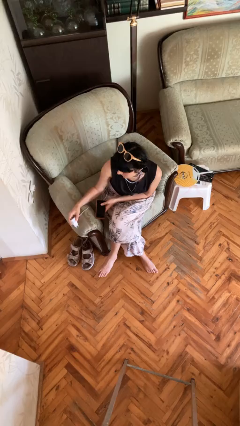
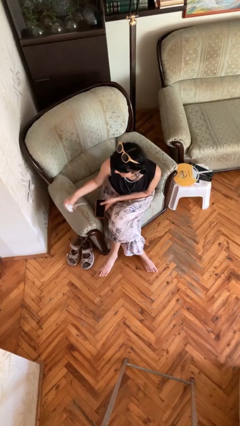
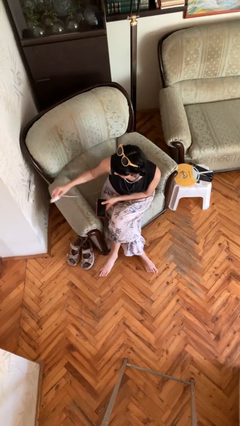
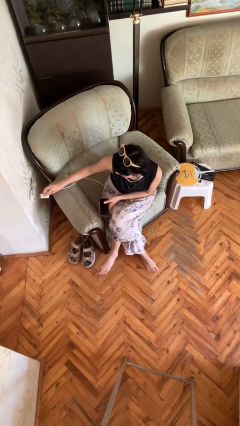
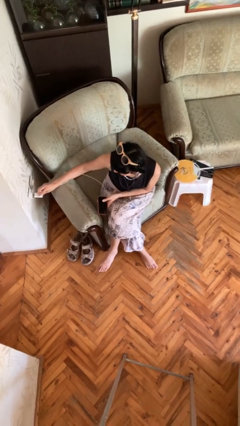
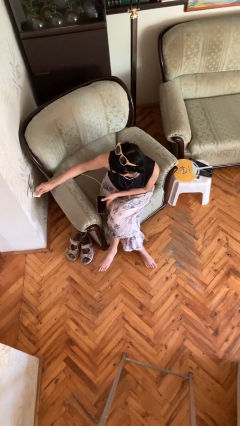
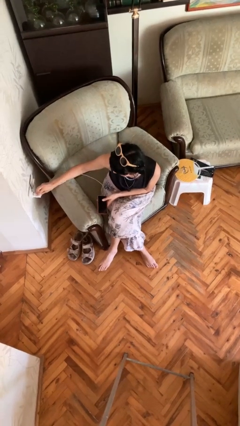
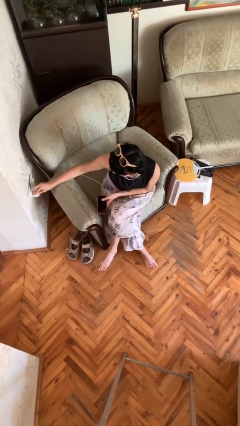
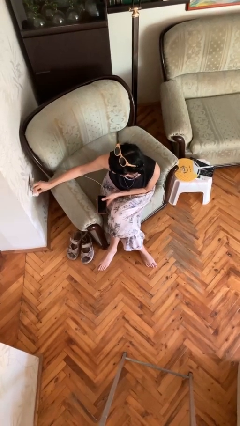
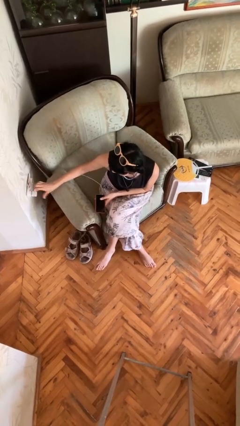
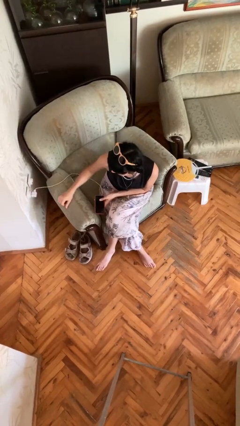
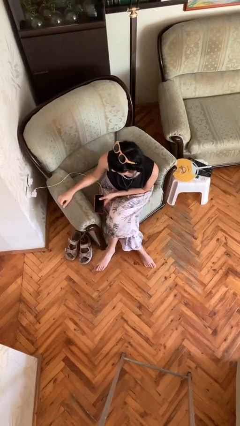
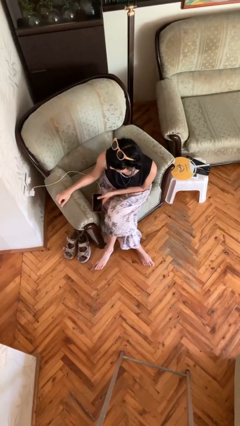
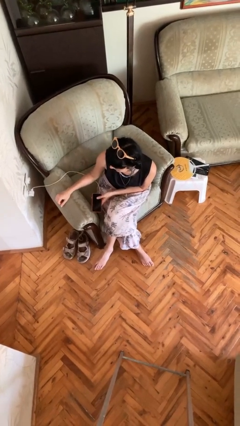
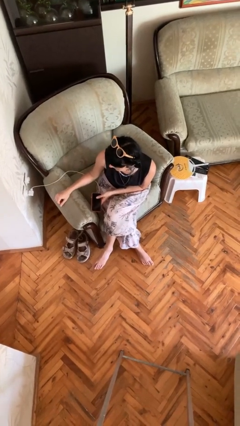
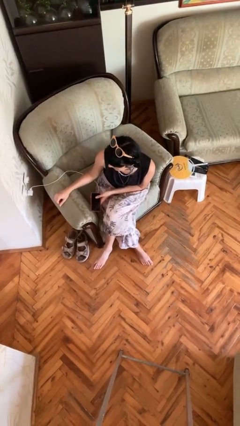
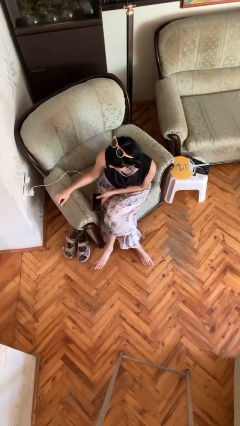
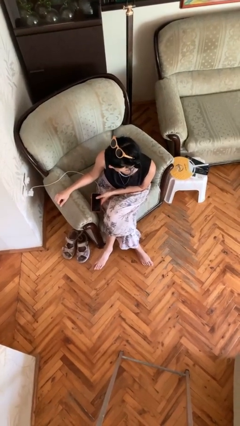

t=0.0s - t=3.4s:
person plugs into electrical socket

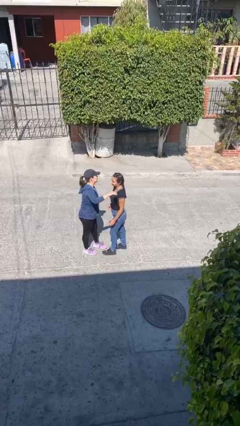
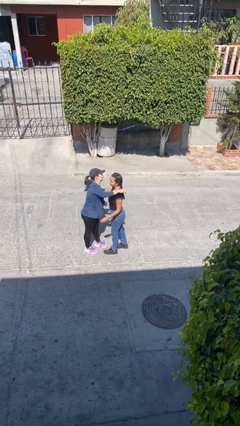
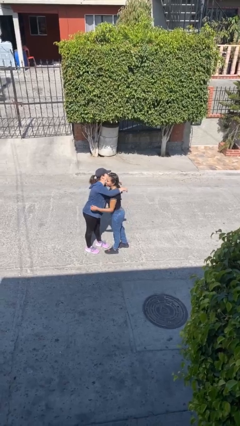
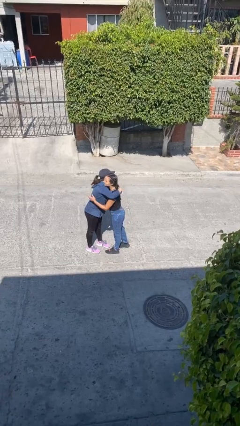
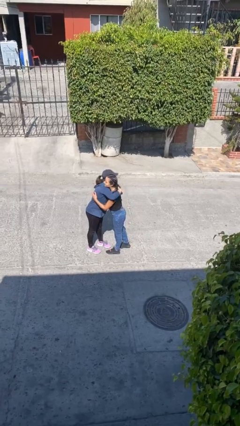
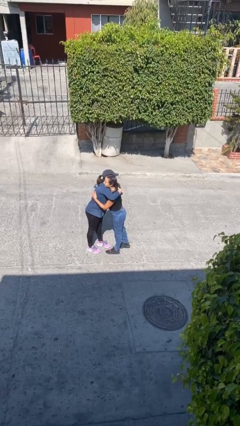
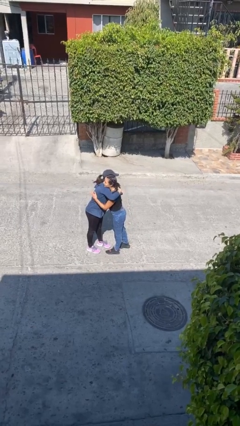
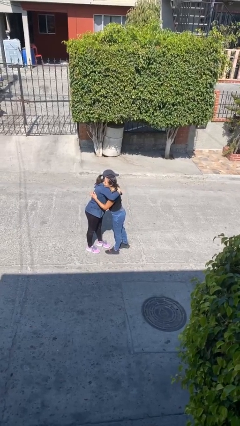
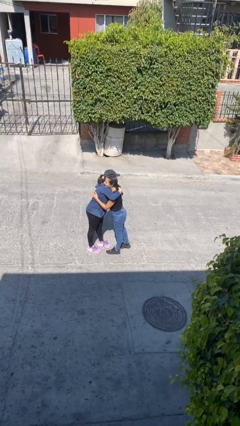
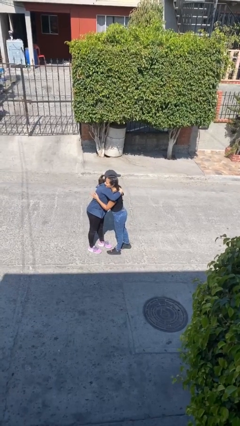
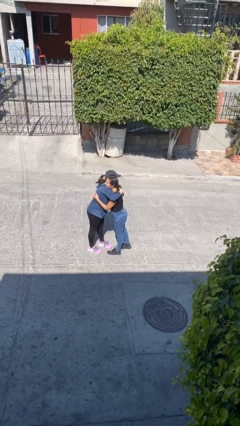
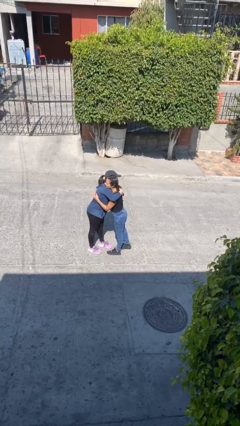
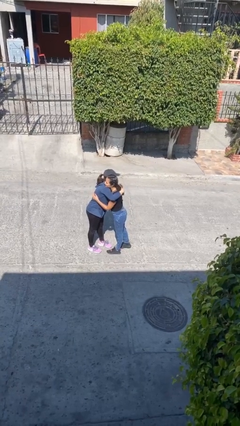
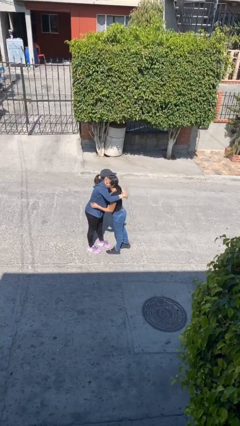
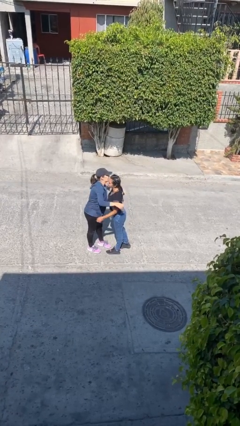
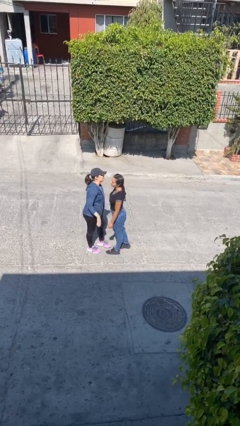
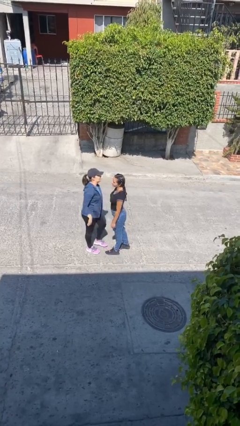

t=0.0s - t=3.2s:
person embraces person

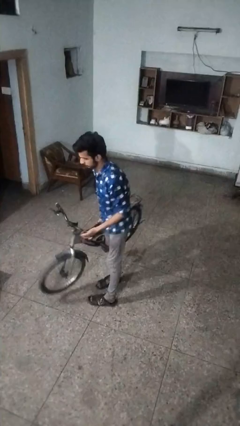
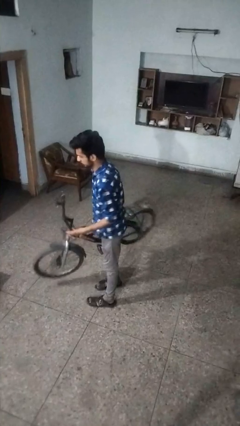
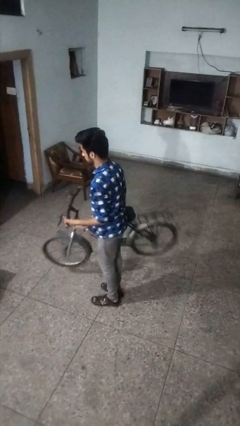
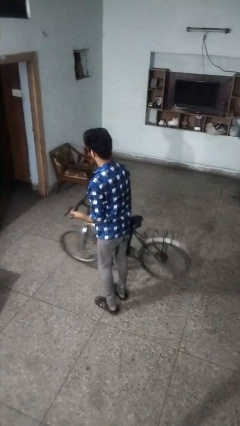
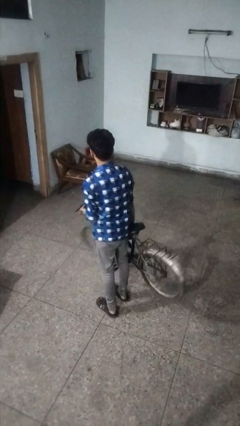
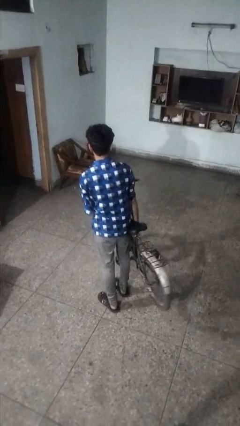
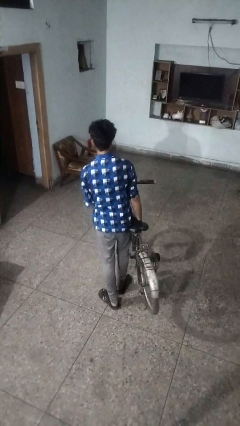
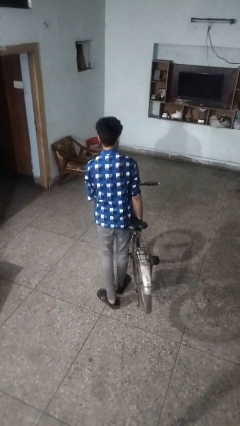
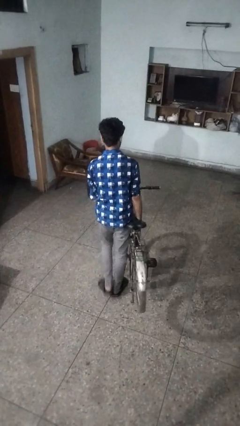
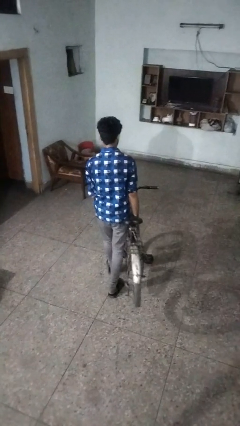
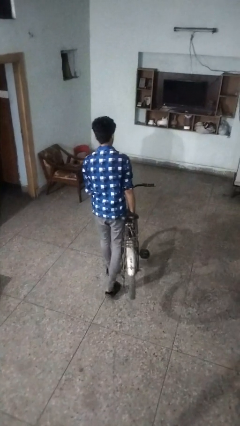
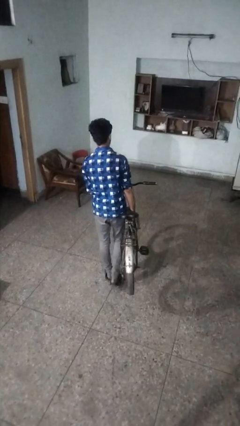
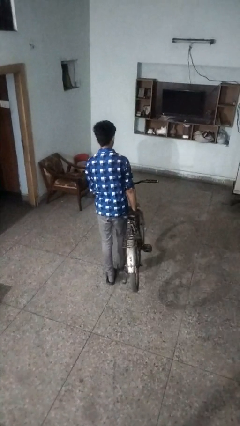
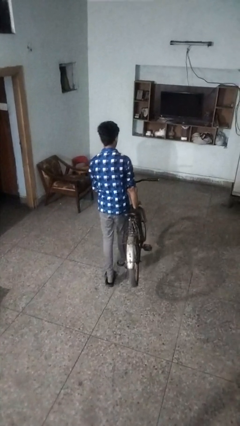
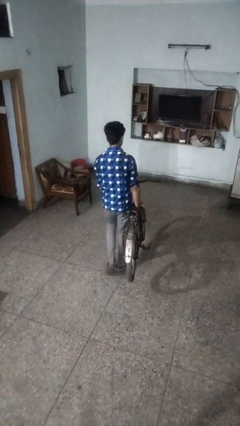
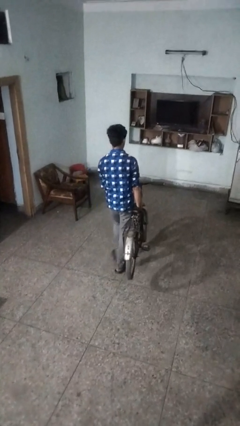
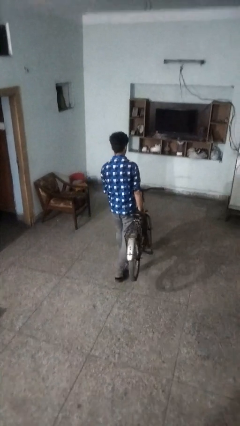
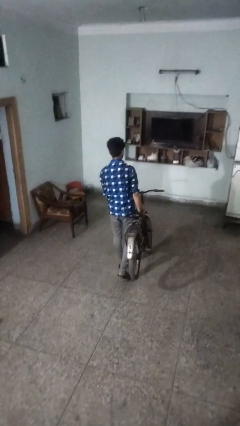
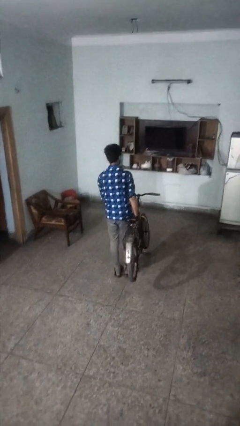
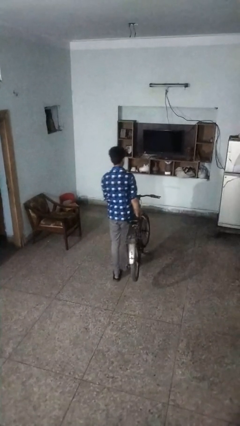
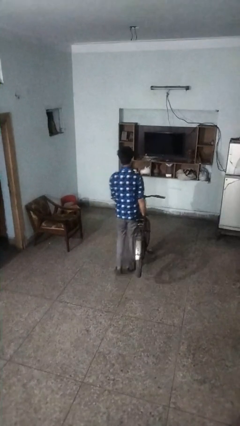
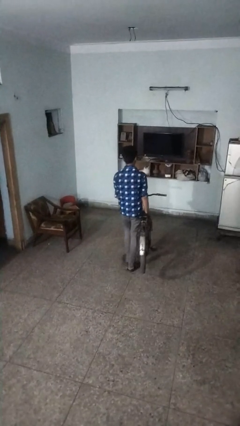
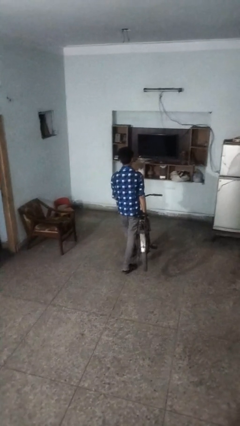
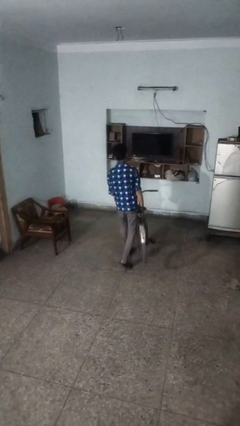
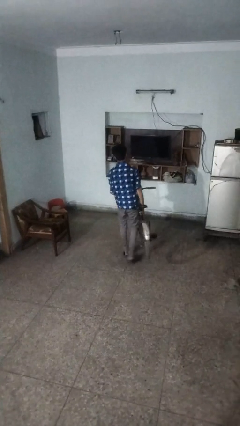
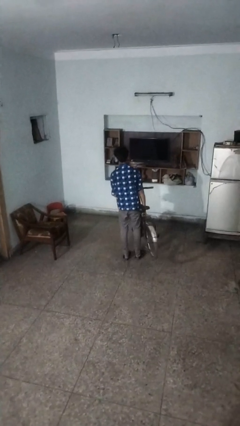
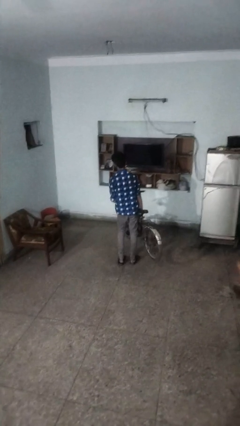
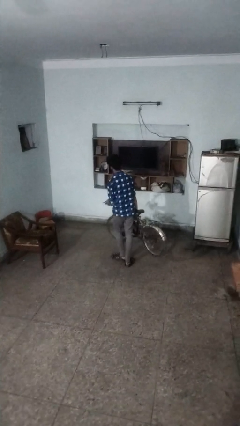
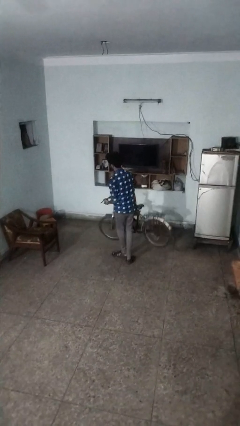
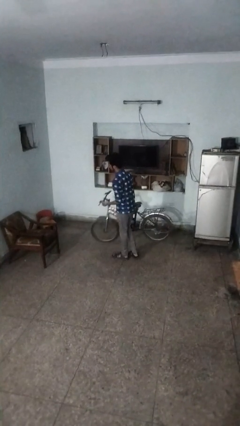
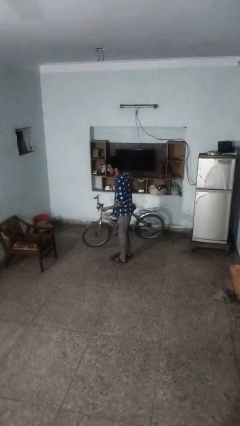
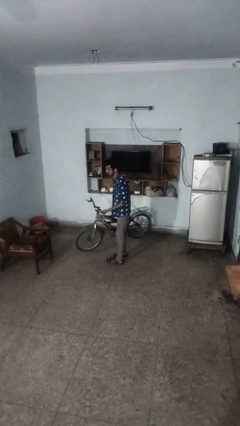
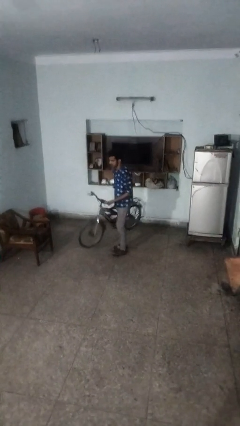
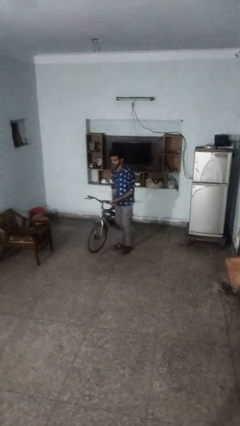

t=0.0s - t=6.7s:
person carries bicycle

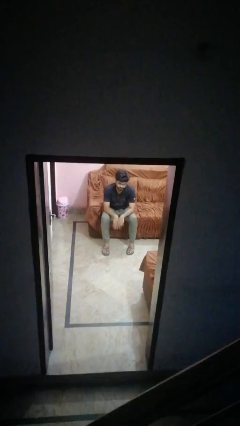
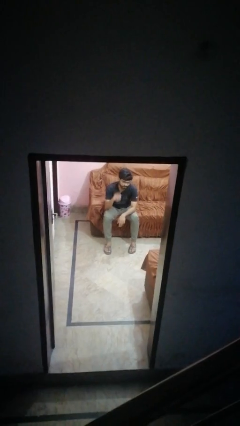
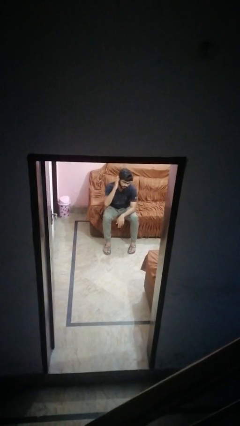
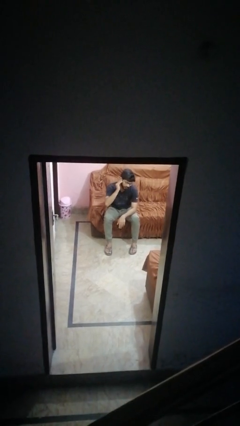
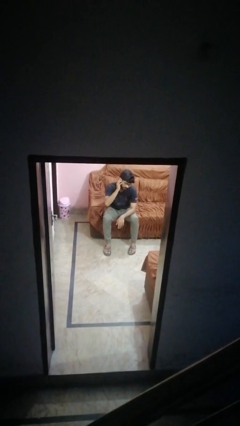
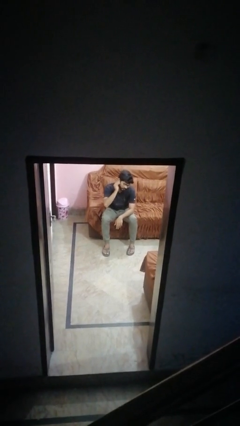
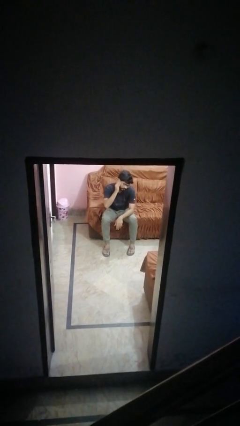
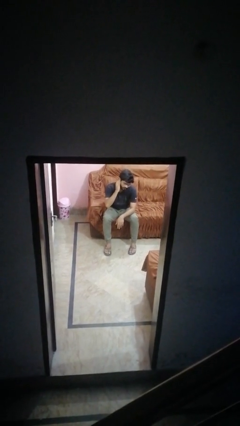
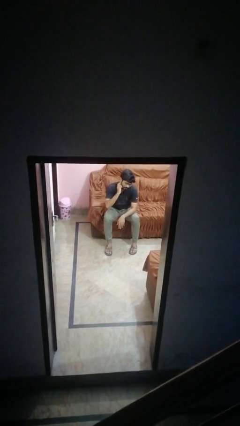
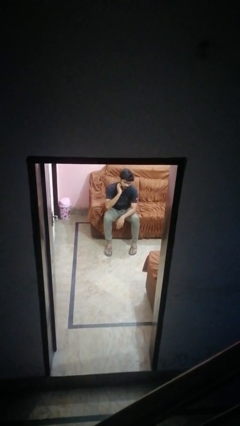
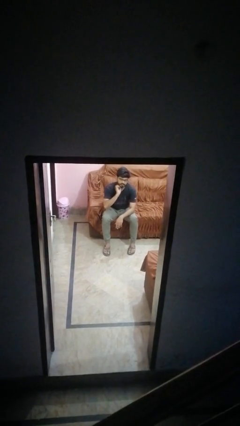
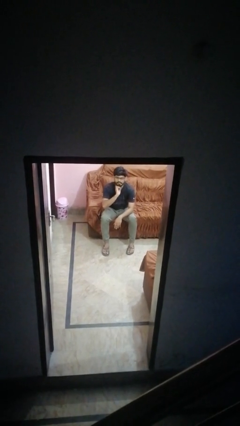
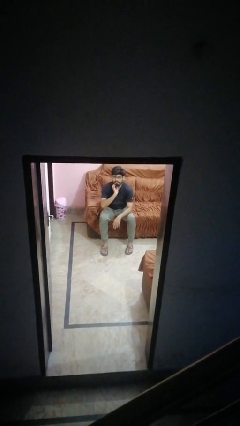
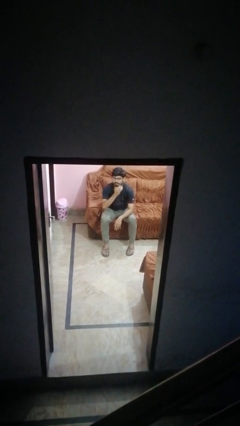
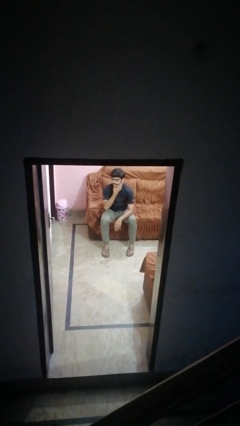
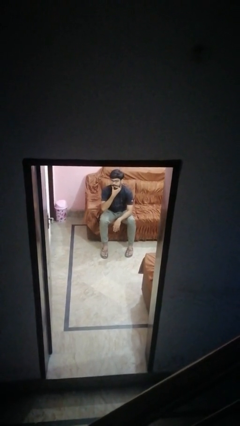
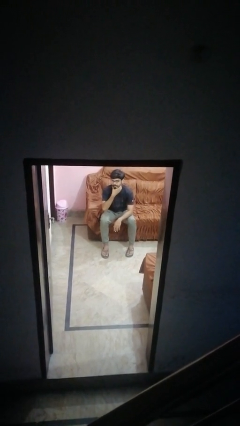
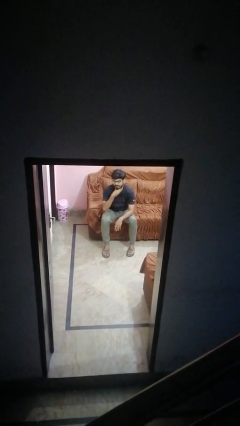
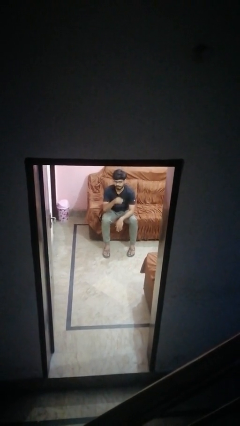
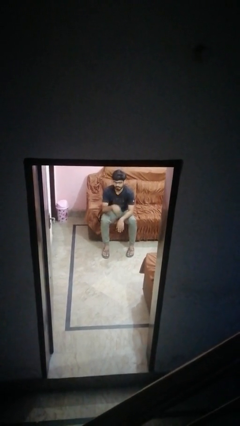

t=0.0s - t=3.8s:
person scratches face

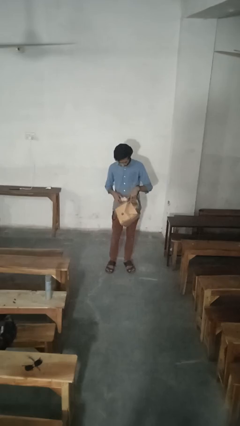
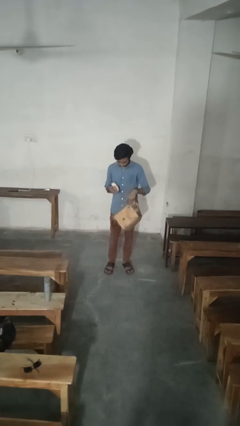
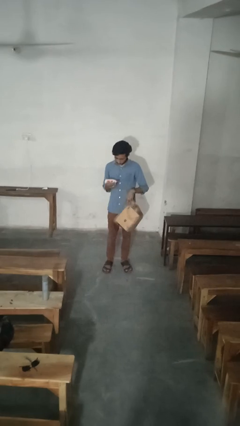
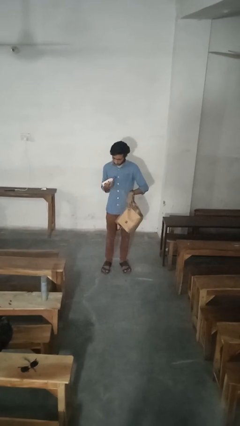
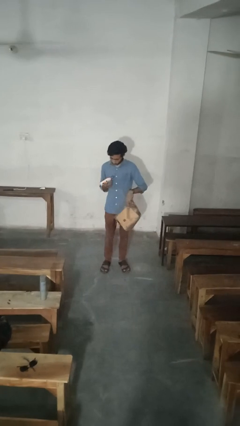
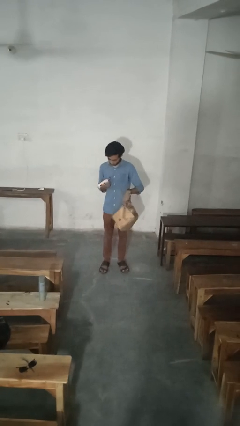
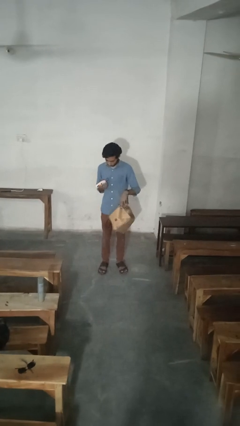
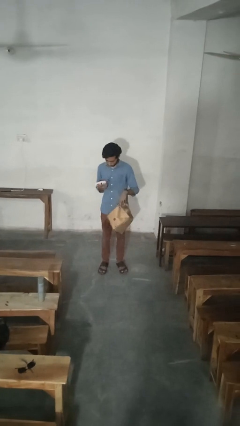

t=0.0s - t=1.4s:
person takes object from purse
